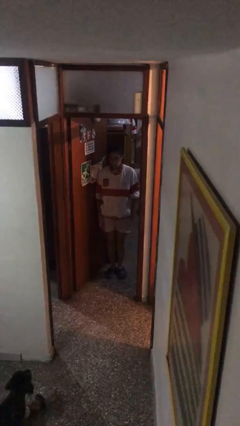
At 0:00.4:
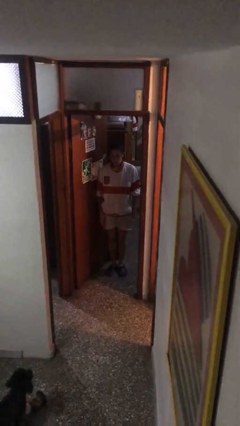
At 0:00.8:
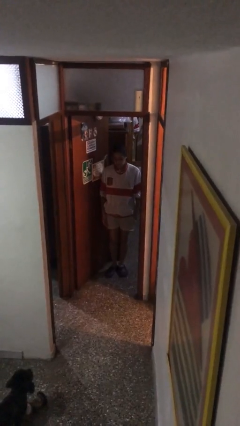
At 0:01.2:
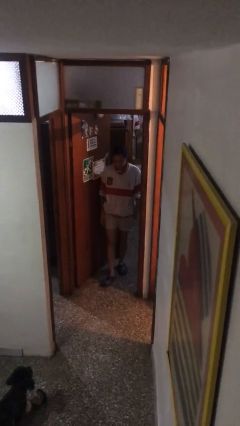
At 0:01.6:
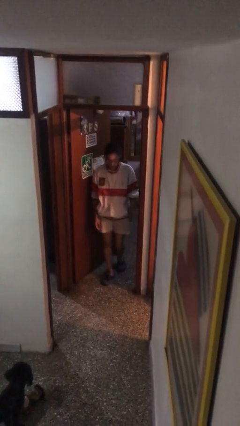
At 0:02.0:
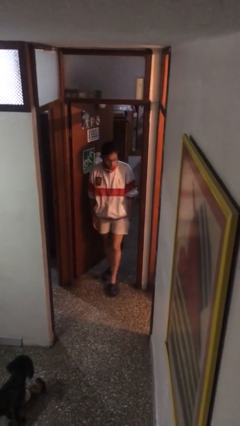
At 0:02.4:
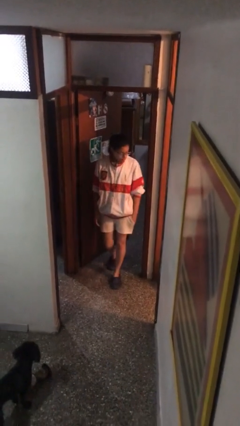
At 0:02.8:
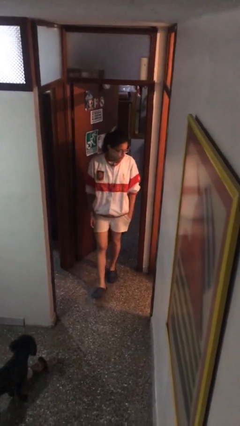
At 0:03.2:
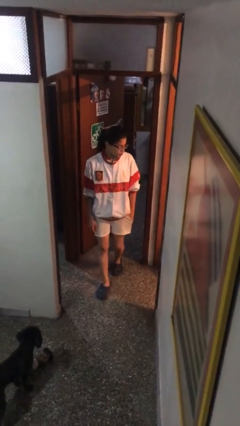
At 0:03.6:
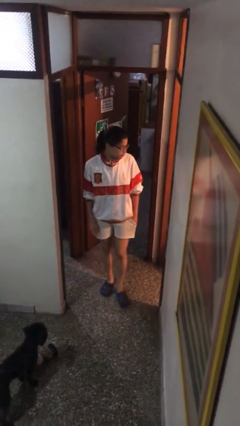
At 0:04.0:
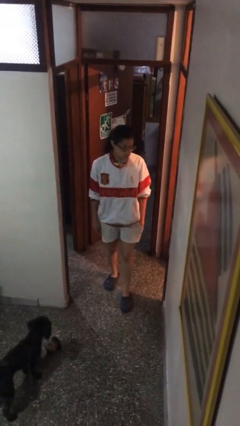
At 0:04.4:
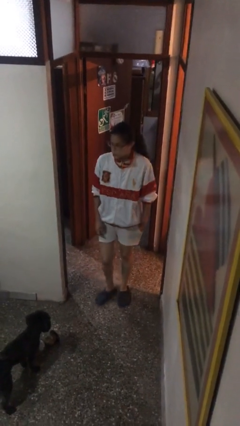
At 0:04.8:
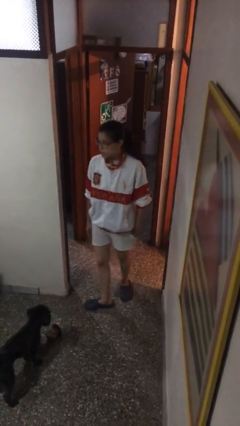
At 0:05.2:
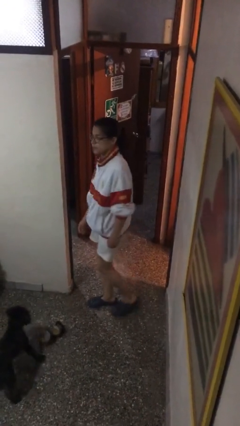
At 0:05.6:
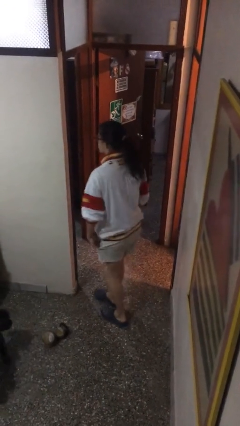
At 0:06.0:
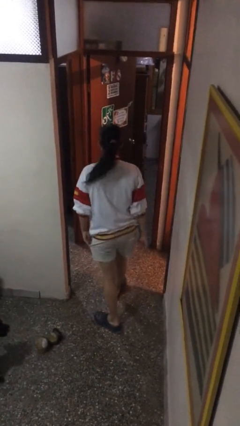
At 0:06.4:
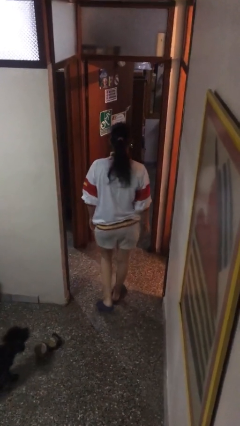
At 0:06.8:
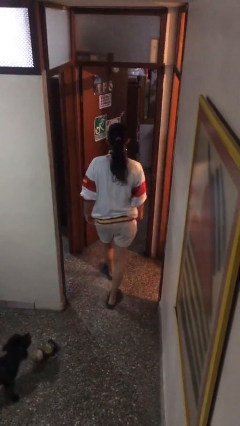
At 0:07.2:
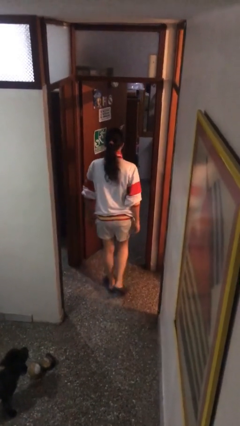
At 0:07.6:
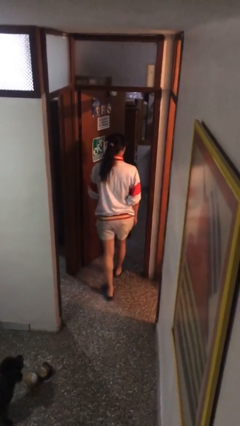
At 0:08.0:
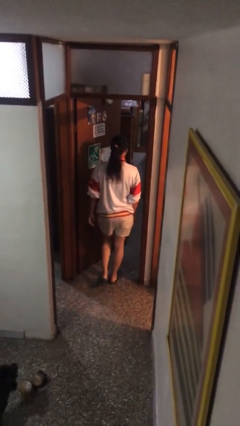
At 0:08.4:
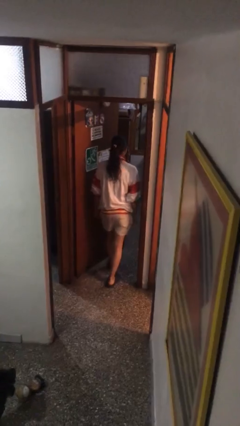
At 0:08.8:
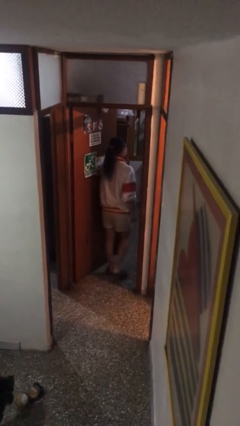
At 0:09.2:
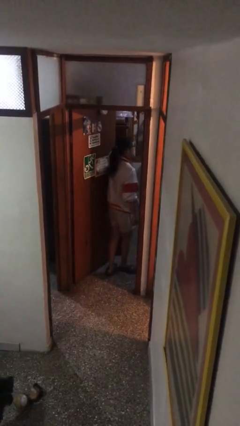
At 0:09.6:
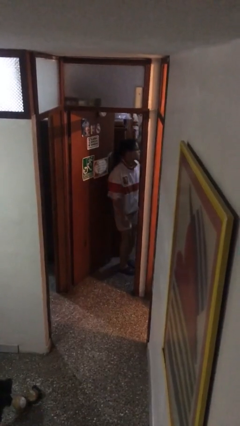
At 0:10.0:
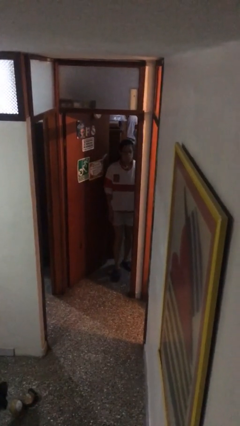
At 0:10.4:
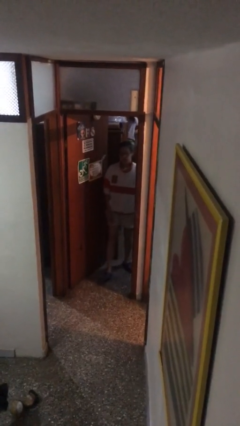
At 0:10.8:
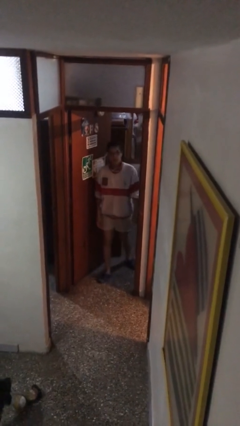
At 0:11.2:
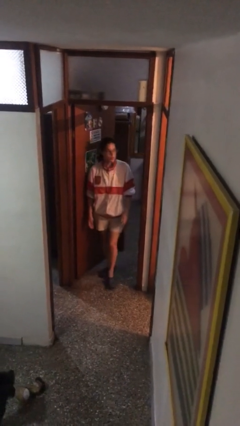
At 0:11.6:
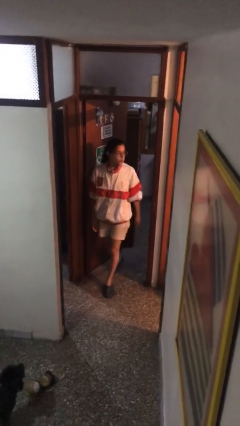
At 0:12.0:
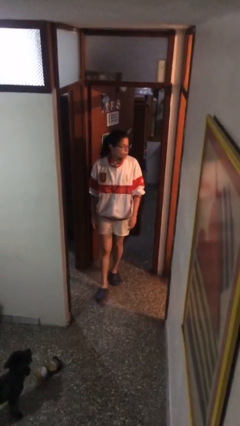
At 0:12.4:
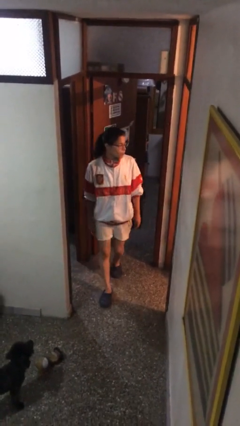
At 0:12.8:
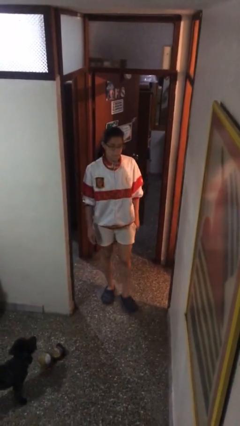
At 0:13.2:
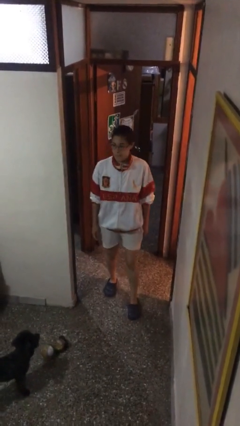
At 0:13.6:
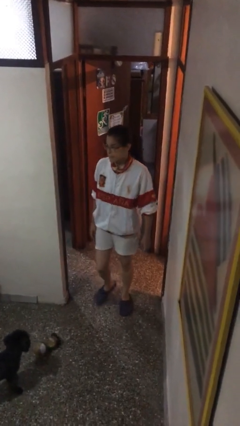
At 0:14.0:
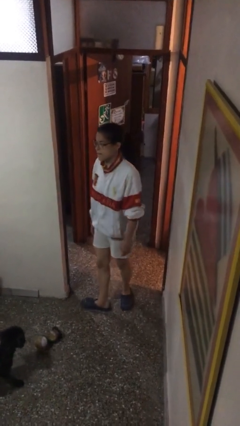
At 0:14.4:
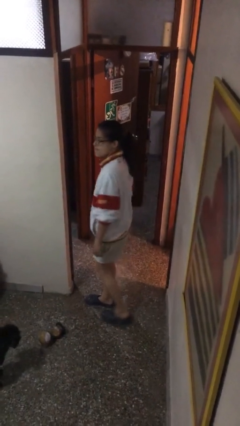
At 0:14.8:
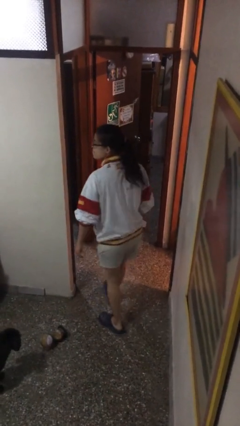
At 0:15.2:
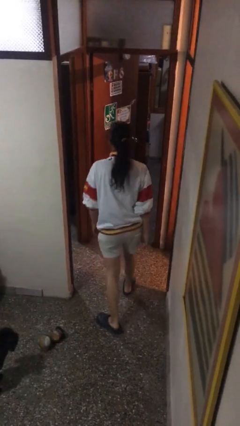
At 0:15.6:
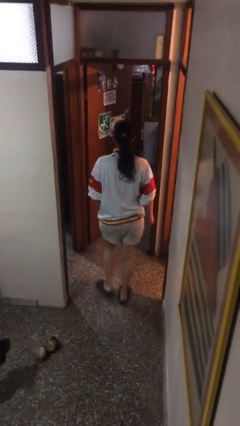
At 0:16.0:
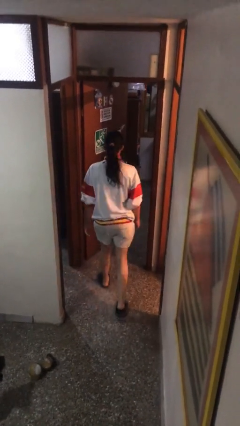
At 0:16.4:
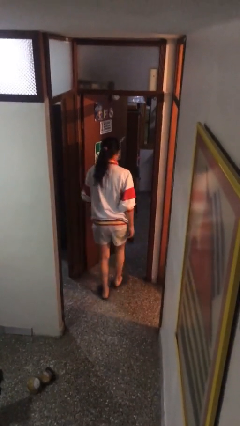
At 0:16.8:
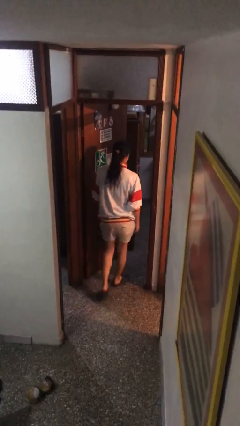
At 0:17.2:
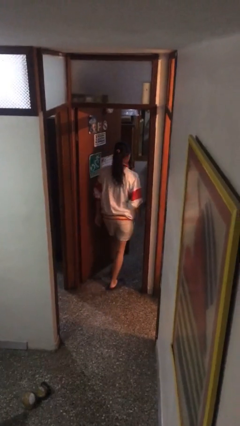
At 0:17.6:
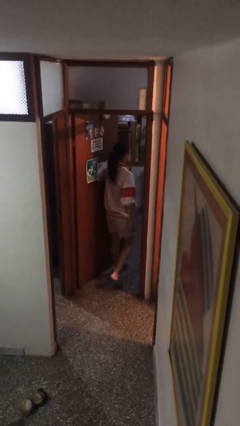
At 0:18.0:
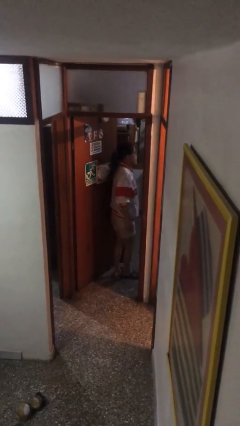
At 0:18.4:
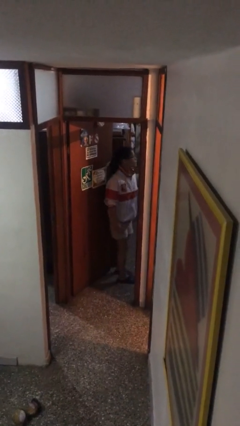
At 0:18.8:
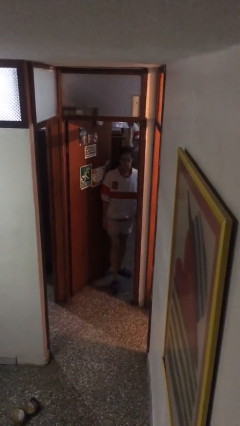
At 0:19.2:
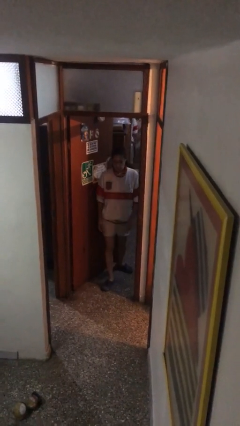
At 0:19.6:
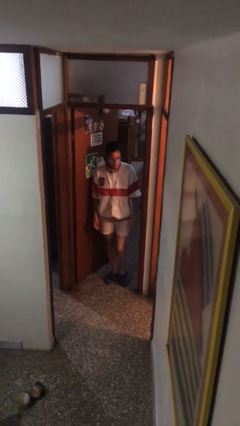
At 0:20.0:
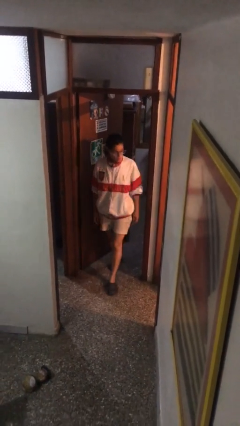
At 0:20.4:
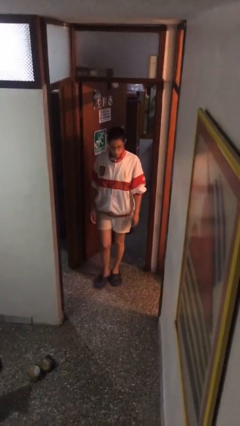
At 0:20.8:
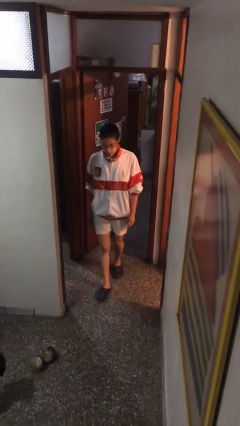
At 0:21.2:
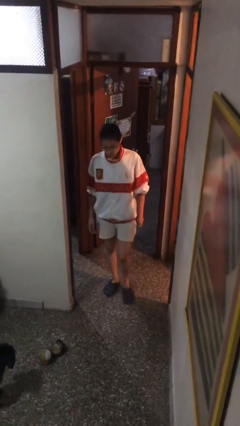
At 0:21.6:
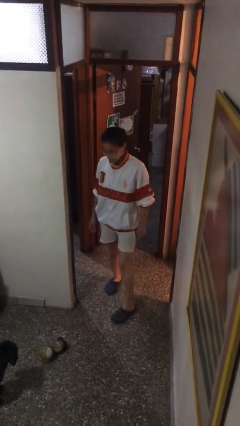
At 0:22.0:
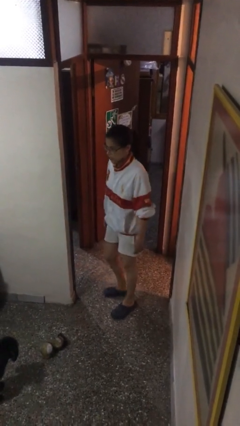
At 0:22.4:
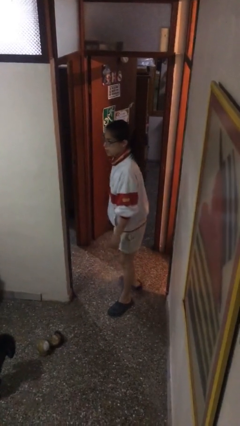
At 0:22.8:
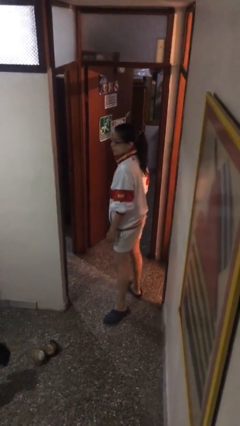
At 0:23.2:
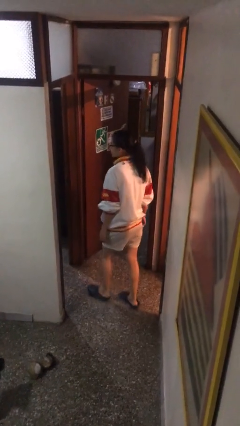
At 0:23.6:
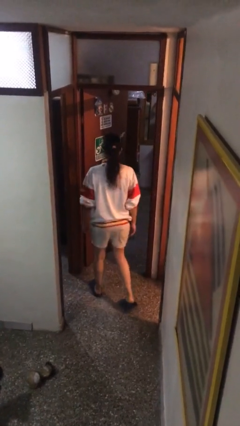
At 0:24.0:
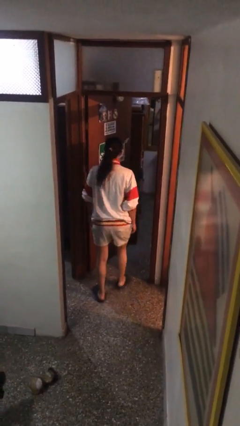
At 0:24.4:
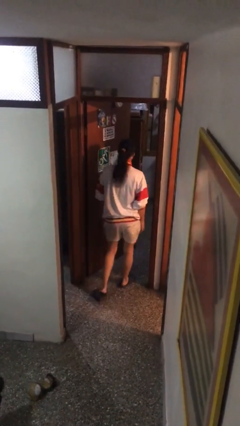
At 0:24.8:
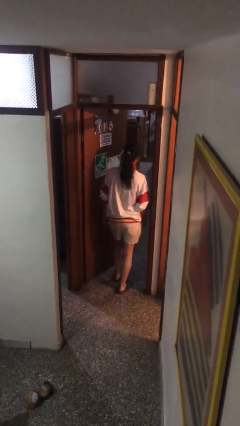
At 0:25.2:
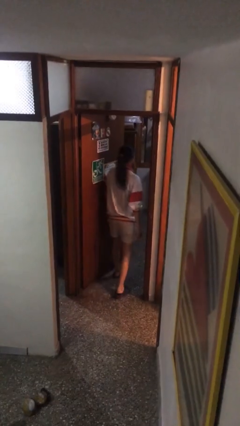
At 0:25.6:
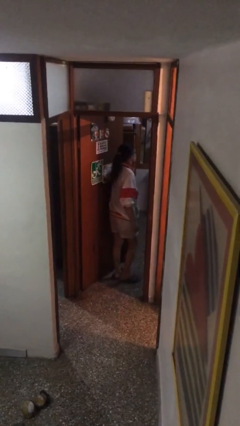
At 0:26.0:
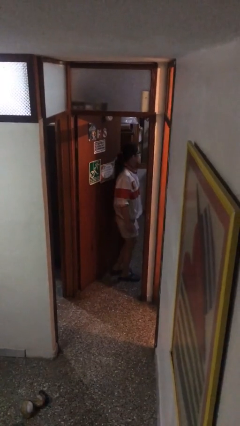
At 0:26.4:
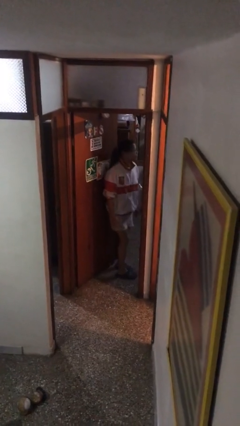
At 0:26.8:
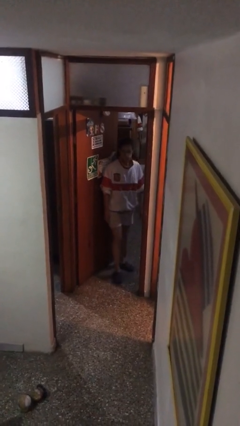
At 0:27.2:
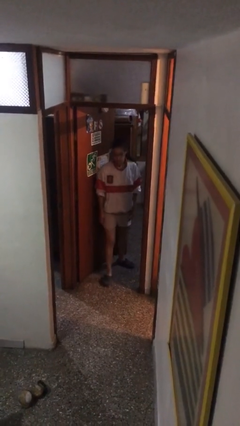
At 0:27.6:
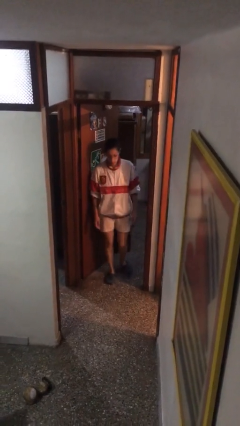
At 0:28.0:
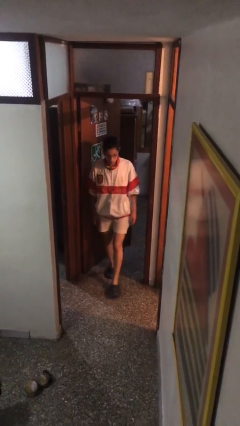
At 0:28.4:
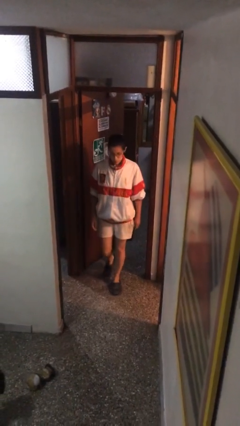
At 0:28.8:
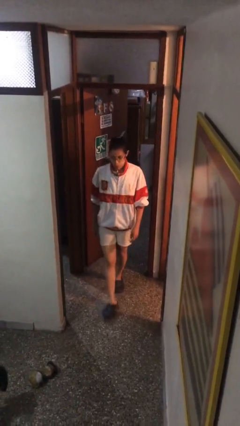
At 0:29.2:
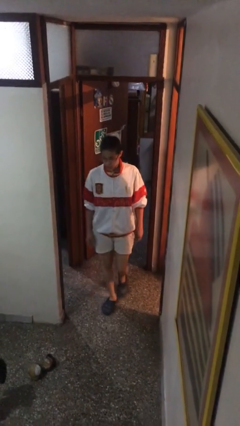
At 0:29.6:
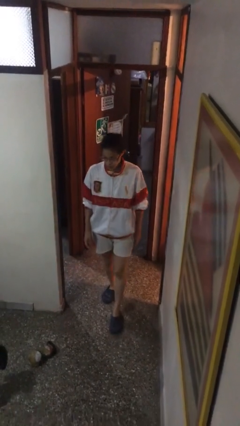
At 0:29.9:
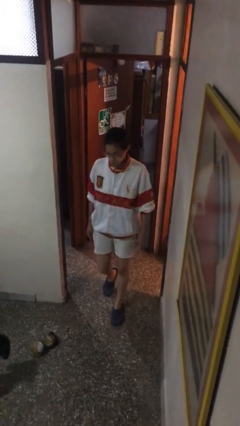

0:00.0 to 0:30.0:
person walks

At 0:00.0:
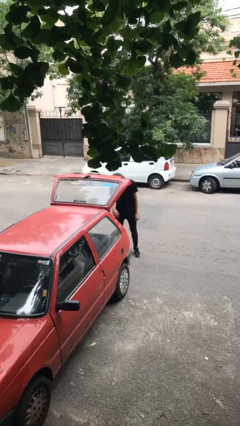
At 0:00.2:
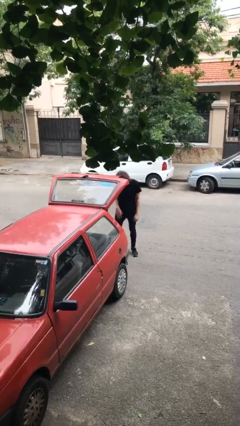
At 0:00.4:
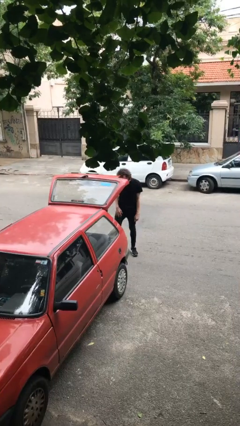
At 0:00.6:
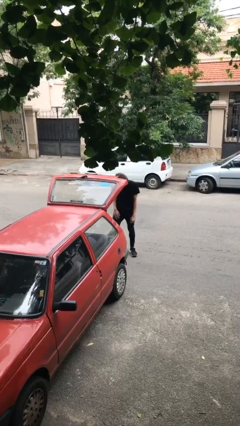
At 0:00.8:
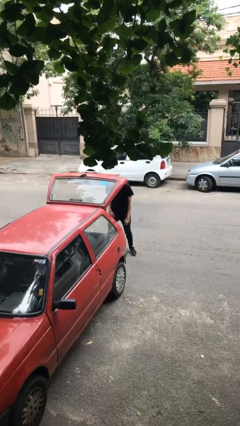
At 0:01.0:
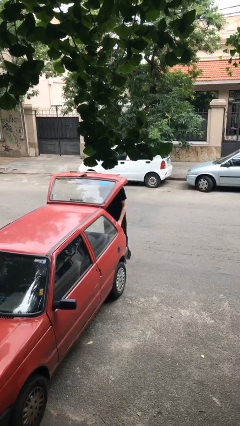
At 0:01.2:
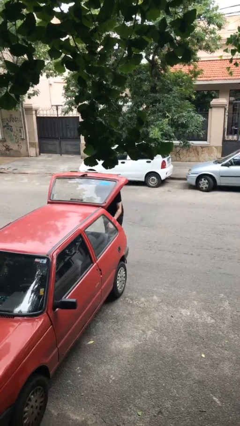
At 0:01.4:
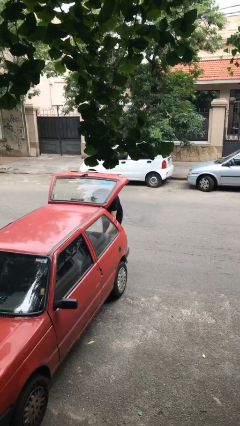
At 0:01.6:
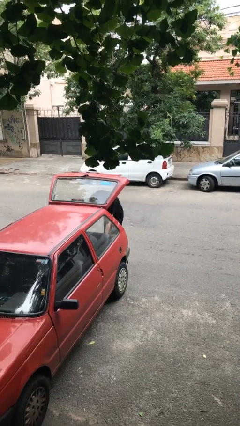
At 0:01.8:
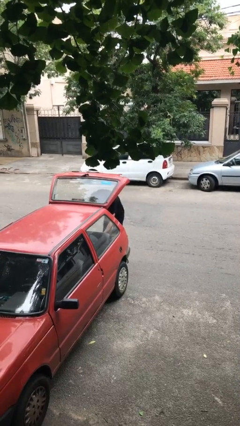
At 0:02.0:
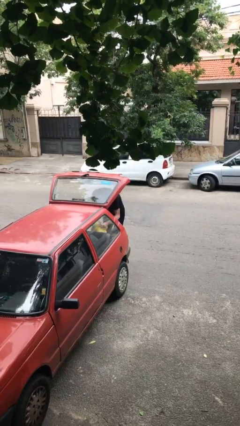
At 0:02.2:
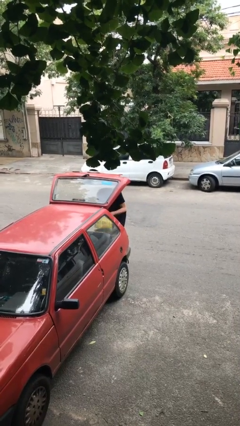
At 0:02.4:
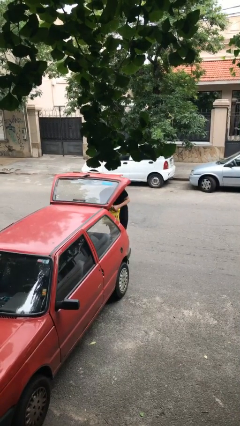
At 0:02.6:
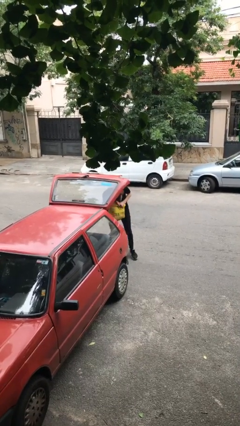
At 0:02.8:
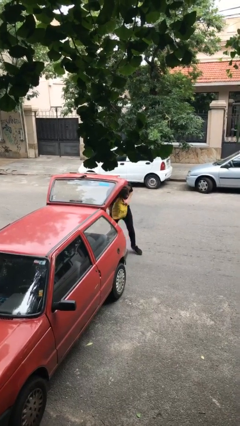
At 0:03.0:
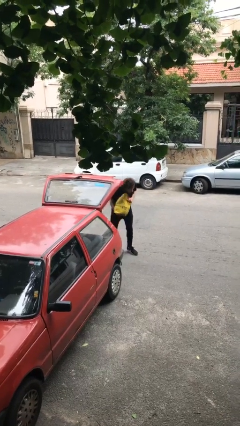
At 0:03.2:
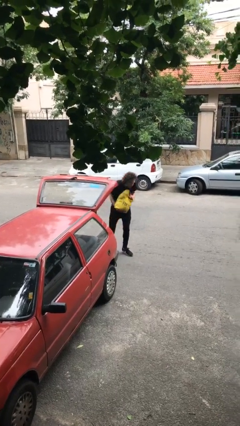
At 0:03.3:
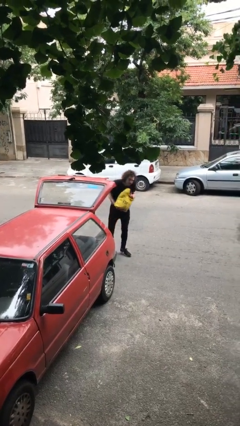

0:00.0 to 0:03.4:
person unloads car
